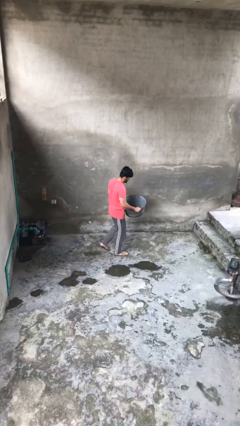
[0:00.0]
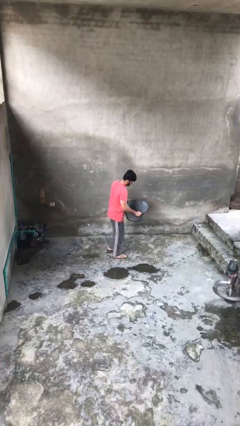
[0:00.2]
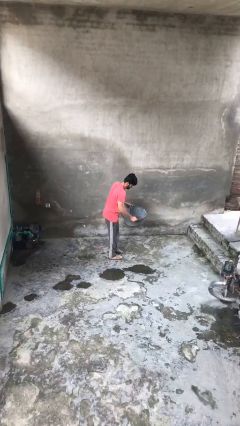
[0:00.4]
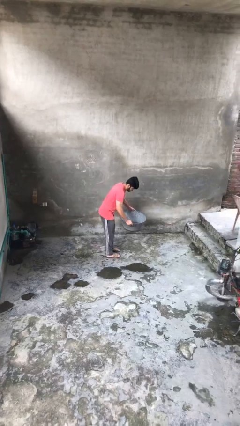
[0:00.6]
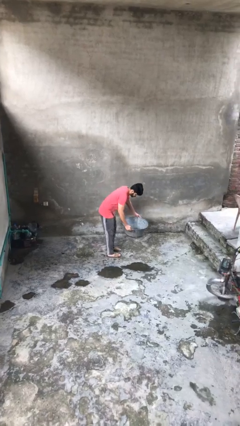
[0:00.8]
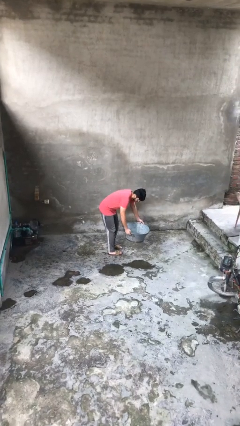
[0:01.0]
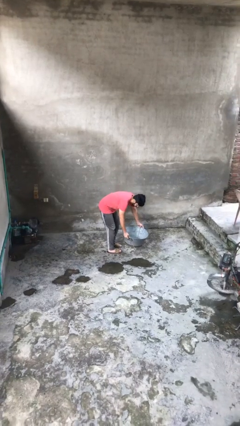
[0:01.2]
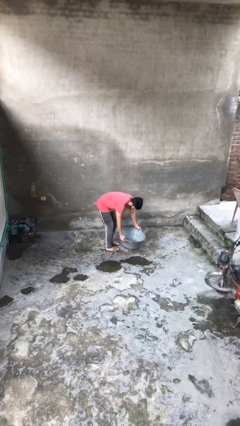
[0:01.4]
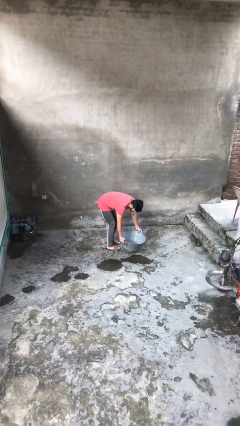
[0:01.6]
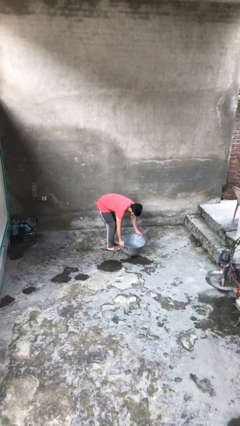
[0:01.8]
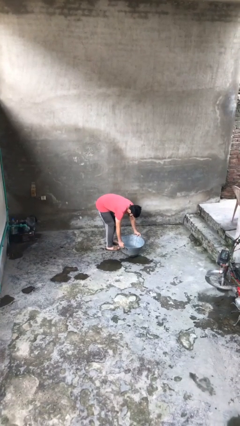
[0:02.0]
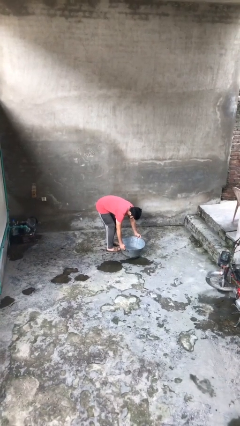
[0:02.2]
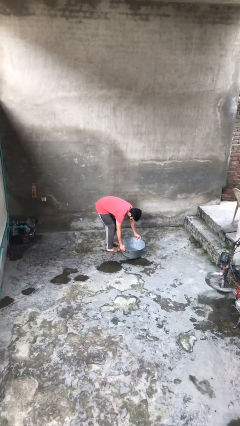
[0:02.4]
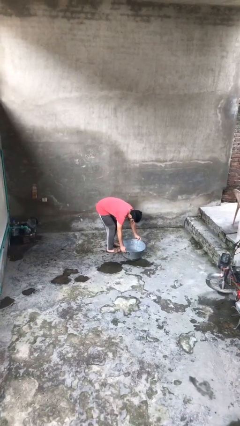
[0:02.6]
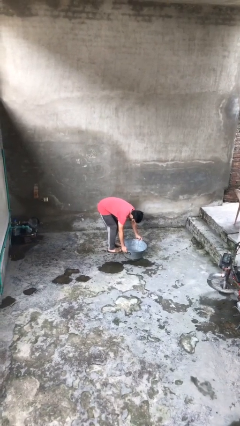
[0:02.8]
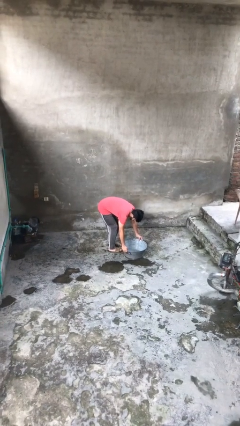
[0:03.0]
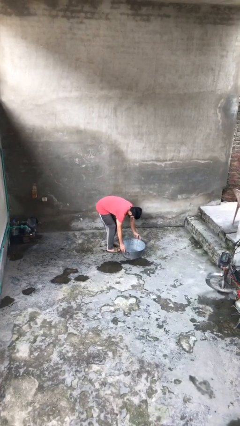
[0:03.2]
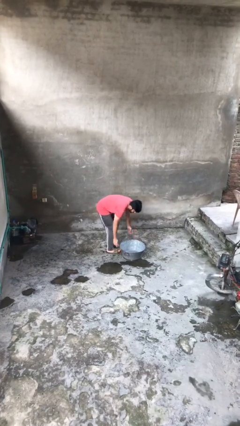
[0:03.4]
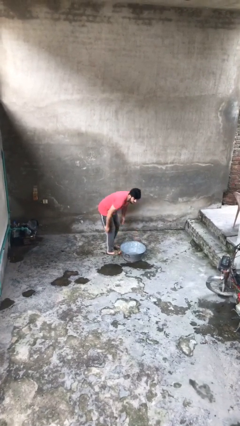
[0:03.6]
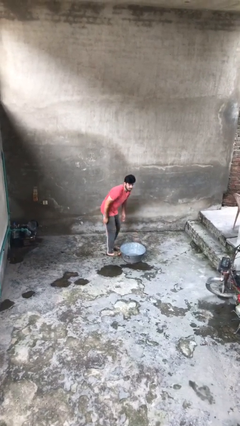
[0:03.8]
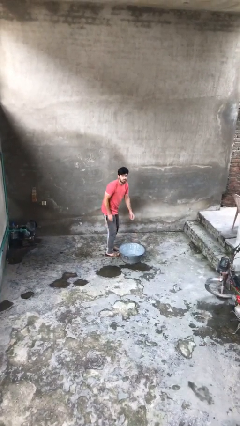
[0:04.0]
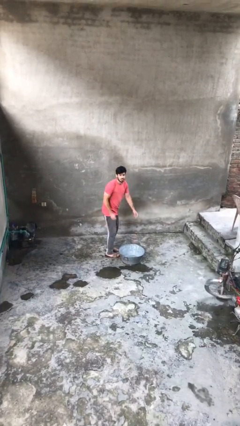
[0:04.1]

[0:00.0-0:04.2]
person puts down object on floor

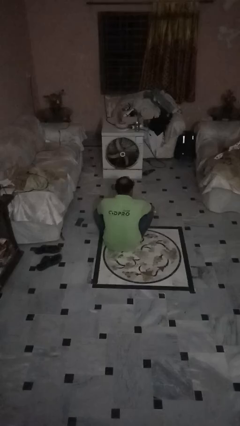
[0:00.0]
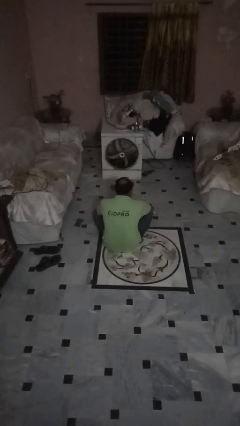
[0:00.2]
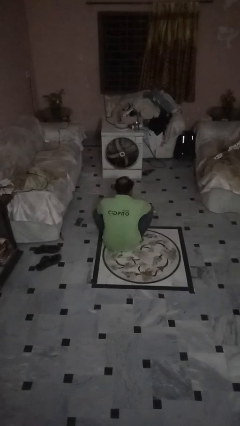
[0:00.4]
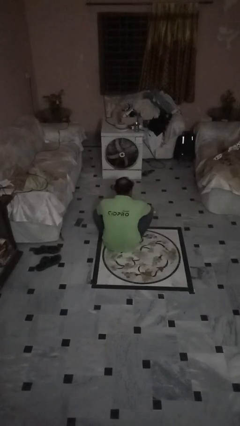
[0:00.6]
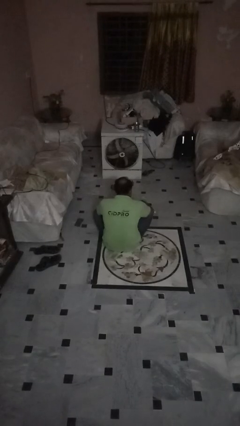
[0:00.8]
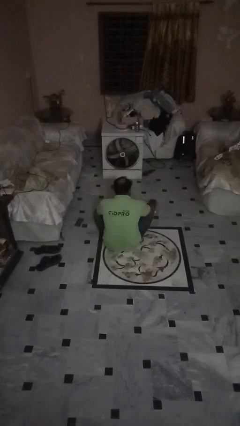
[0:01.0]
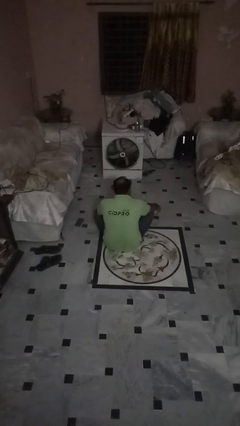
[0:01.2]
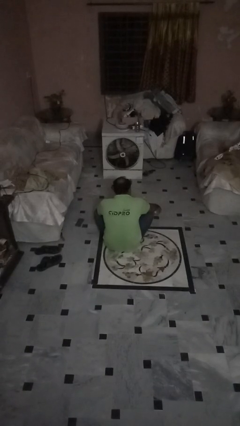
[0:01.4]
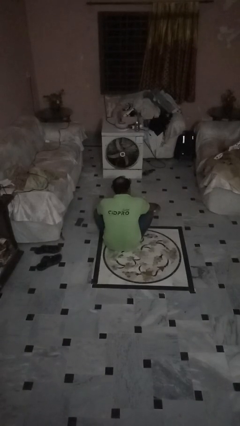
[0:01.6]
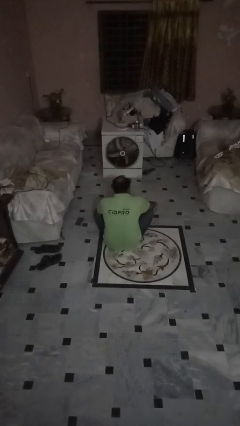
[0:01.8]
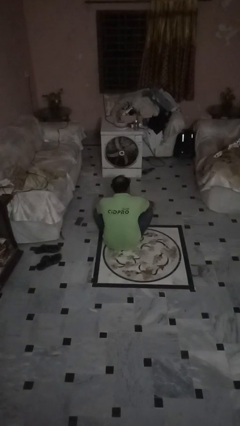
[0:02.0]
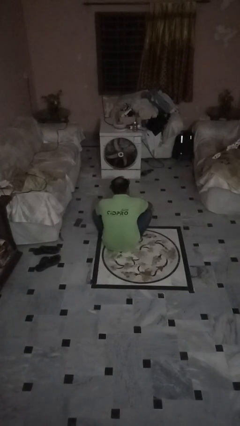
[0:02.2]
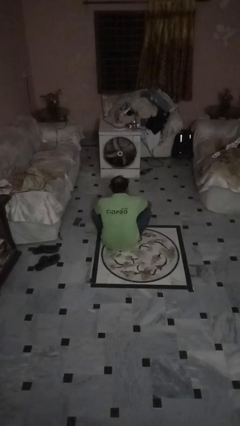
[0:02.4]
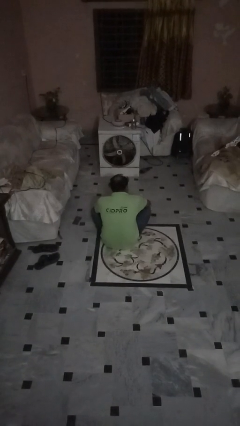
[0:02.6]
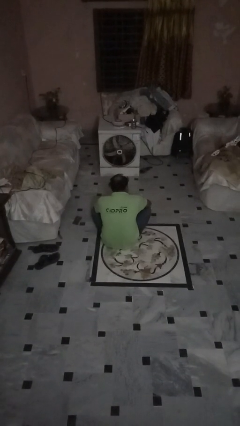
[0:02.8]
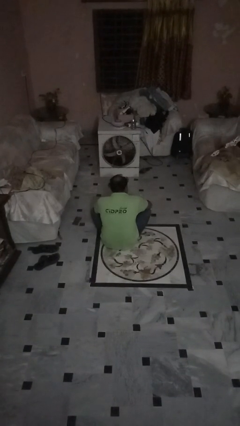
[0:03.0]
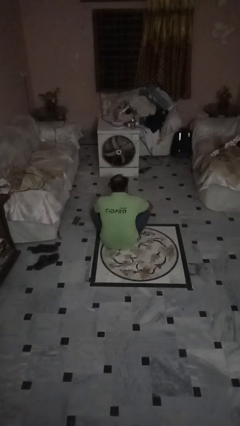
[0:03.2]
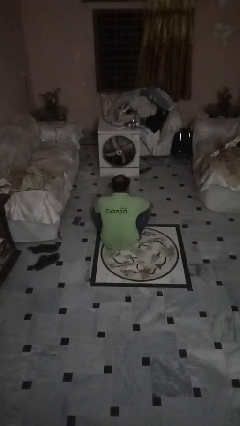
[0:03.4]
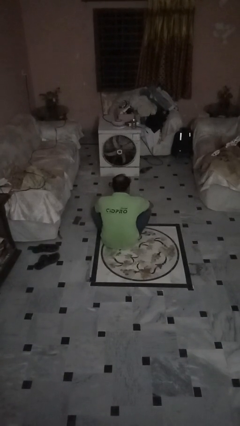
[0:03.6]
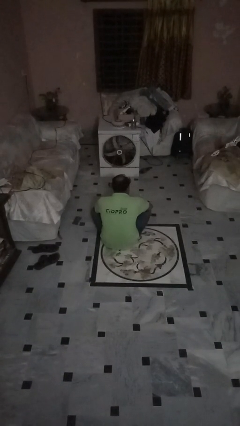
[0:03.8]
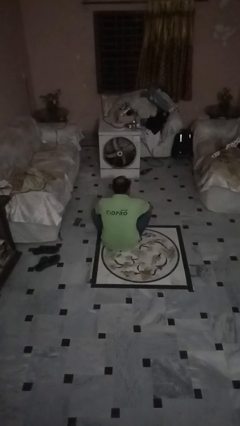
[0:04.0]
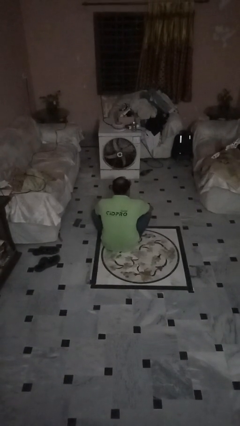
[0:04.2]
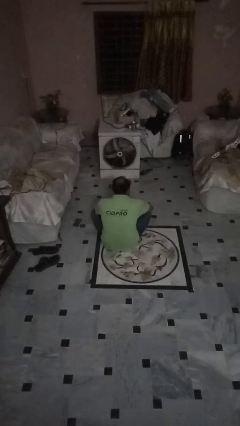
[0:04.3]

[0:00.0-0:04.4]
person spills on floor

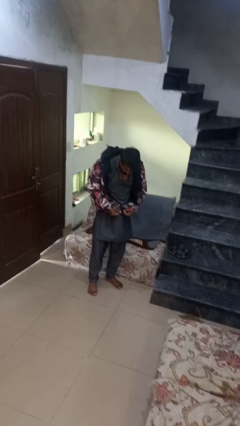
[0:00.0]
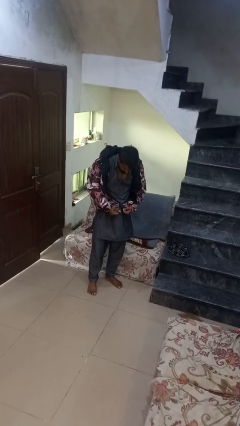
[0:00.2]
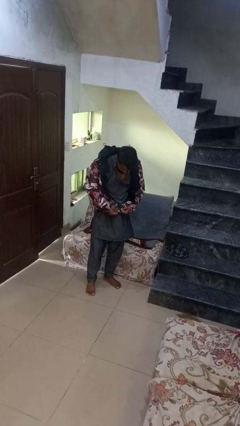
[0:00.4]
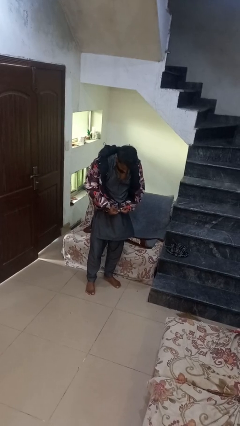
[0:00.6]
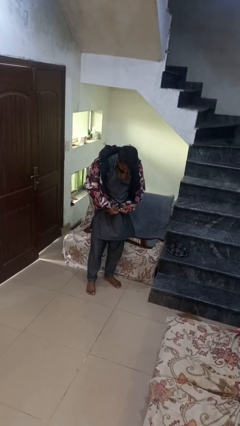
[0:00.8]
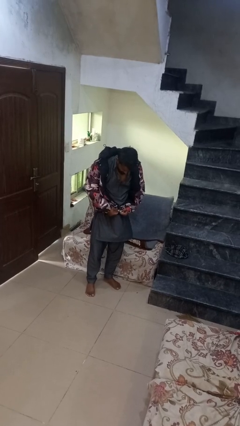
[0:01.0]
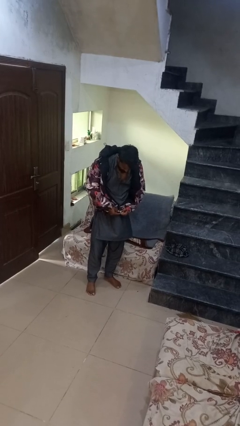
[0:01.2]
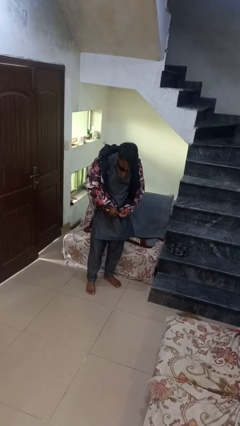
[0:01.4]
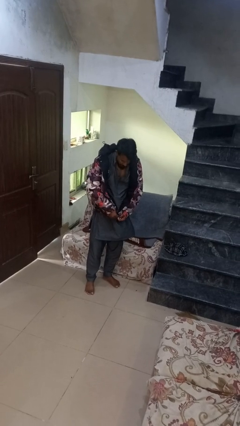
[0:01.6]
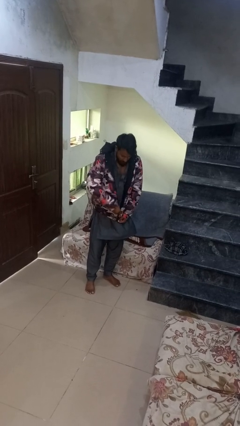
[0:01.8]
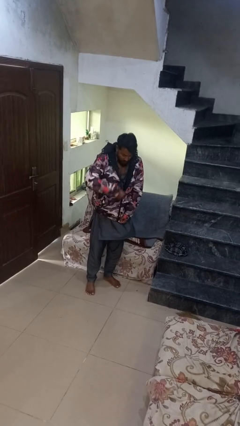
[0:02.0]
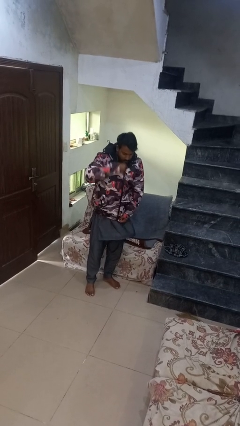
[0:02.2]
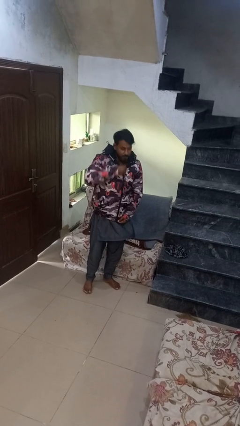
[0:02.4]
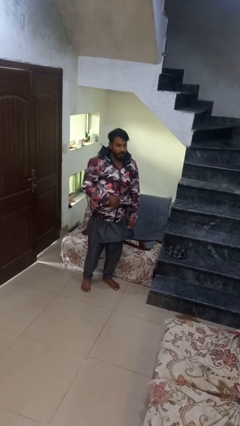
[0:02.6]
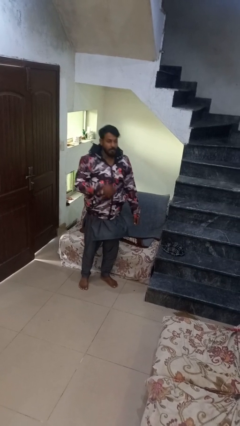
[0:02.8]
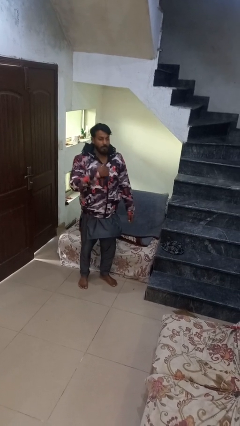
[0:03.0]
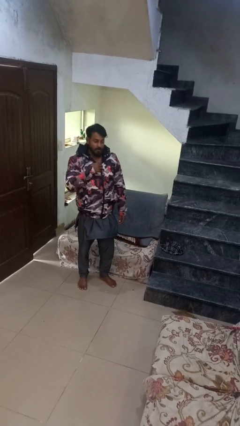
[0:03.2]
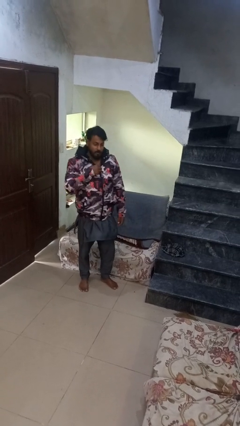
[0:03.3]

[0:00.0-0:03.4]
person zips up jacket

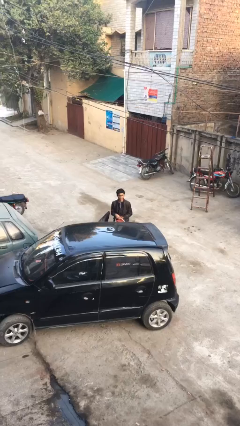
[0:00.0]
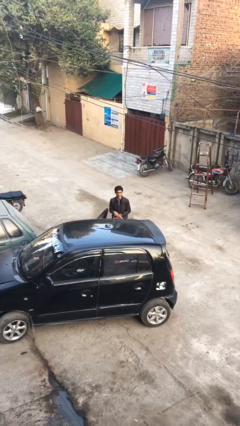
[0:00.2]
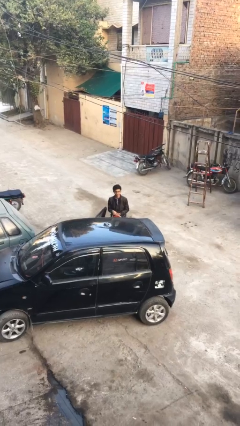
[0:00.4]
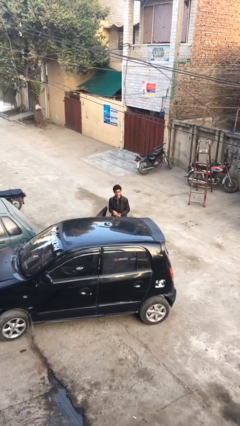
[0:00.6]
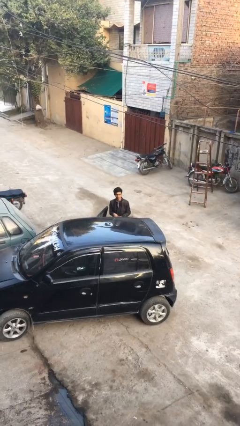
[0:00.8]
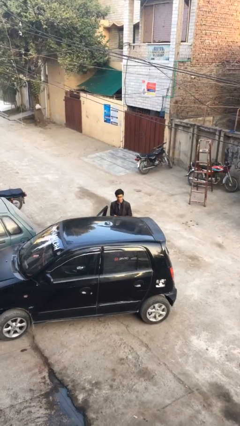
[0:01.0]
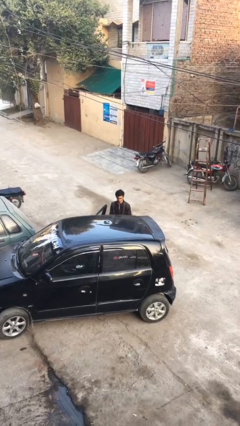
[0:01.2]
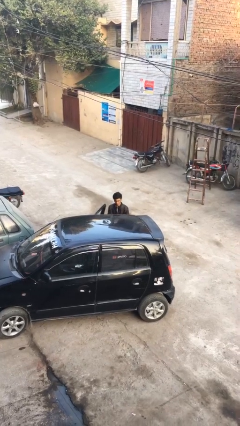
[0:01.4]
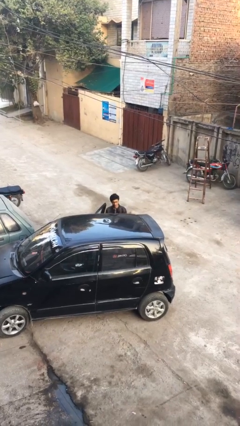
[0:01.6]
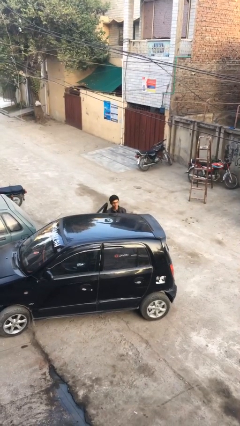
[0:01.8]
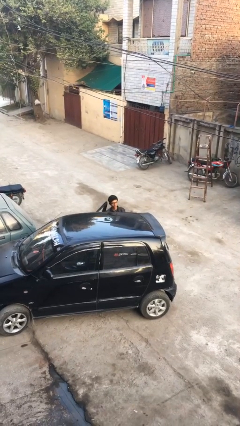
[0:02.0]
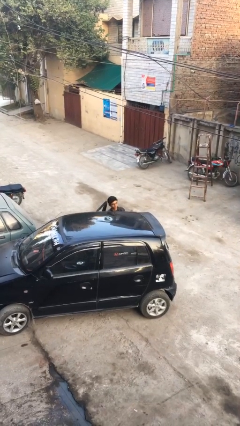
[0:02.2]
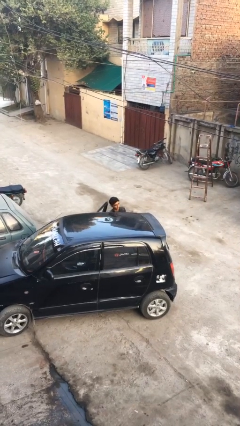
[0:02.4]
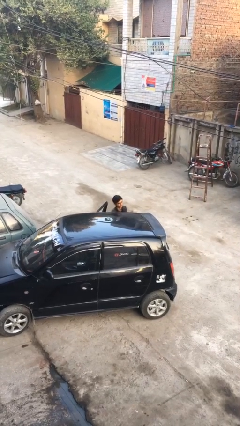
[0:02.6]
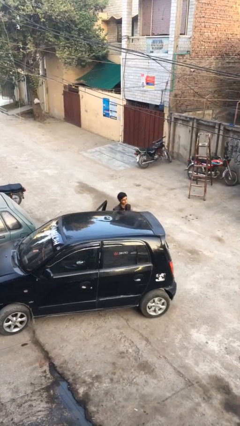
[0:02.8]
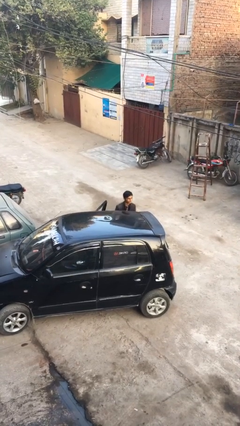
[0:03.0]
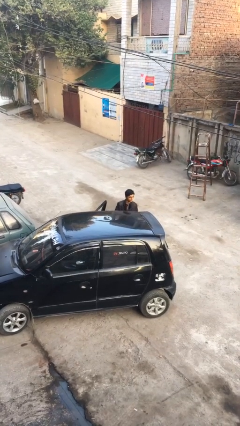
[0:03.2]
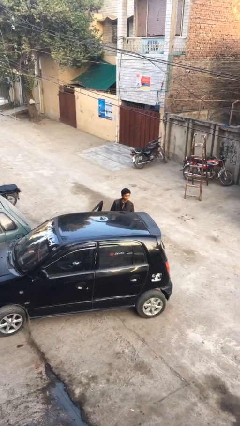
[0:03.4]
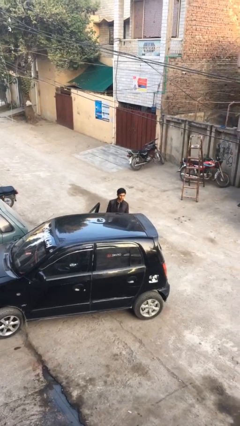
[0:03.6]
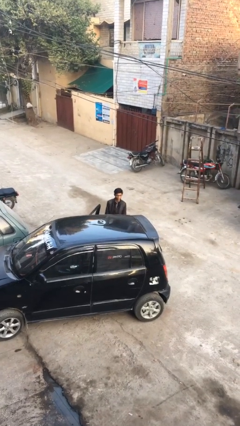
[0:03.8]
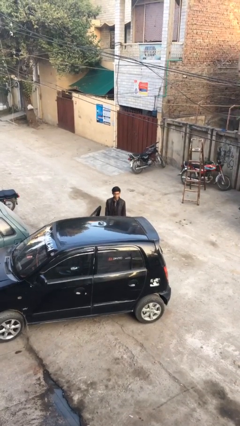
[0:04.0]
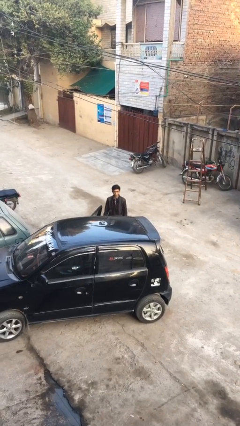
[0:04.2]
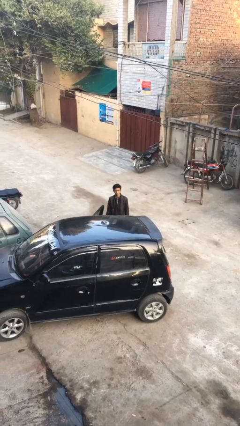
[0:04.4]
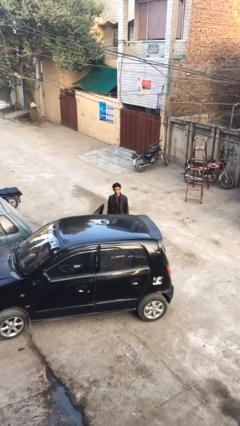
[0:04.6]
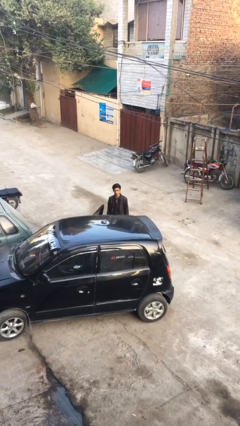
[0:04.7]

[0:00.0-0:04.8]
person loads car

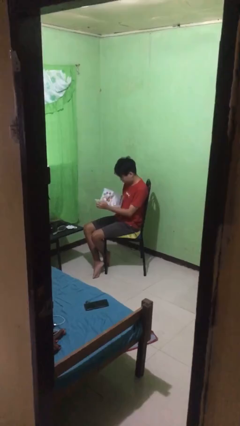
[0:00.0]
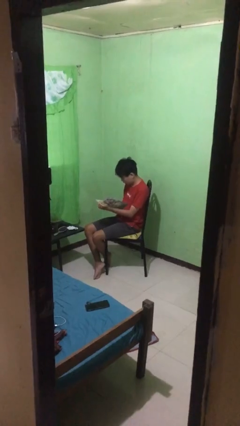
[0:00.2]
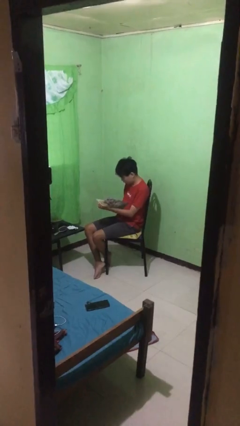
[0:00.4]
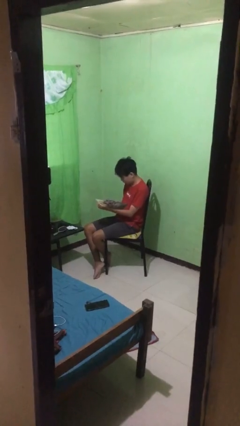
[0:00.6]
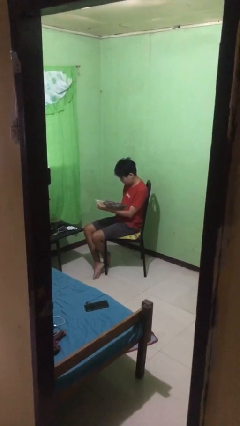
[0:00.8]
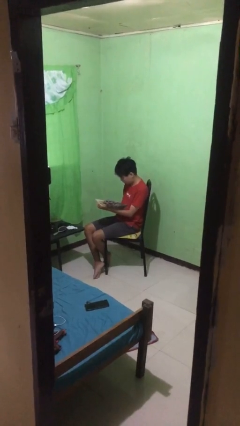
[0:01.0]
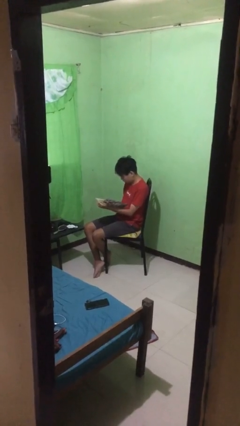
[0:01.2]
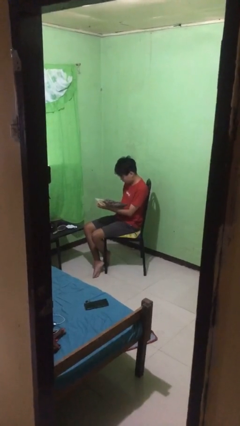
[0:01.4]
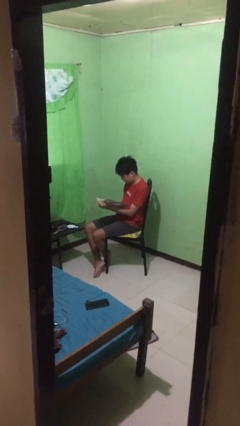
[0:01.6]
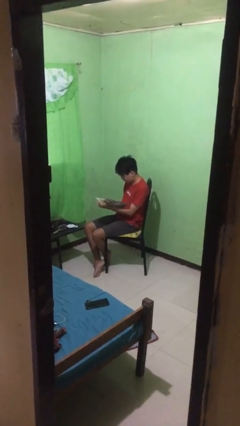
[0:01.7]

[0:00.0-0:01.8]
person reads document
